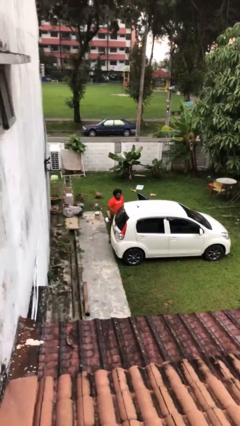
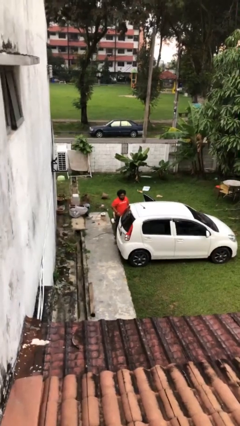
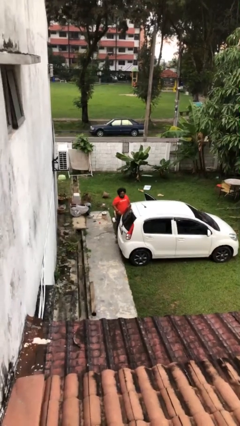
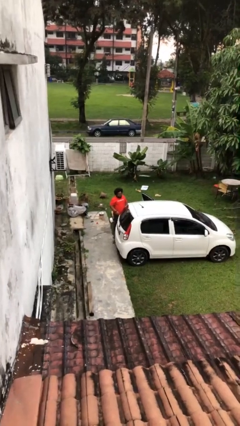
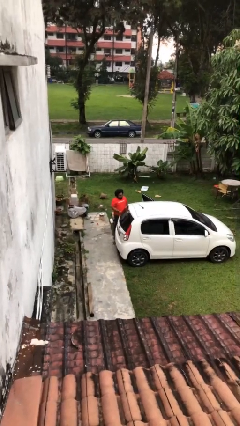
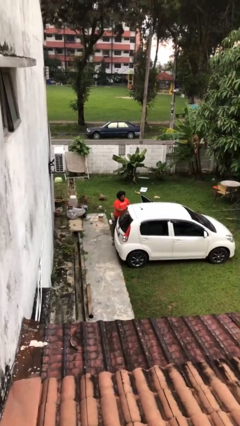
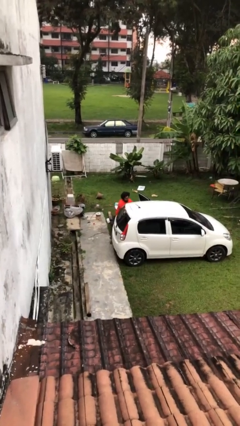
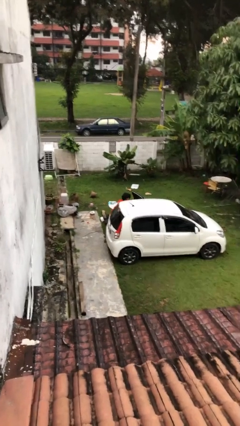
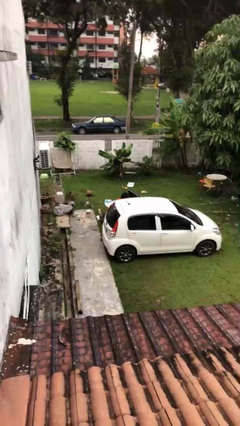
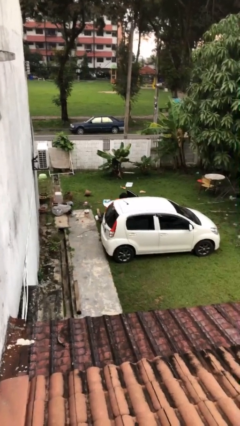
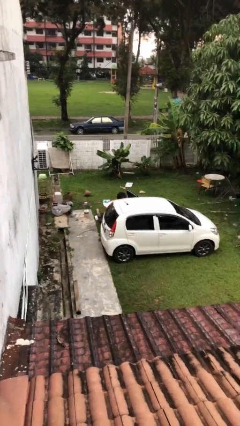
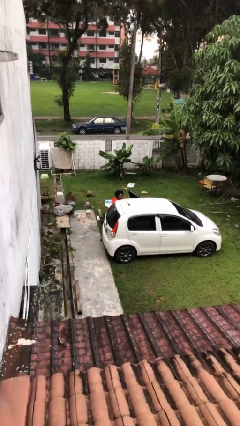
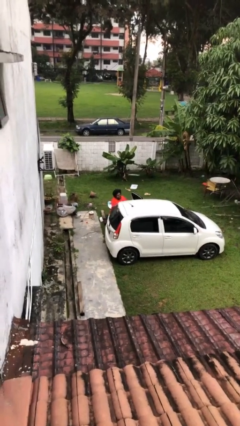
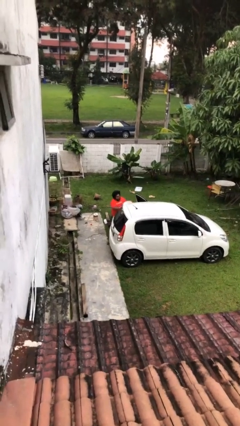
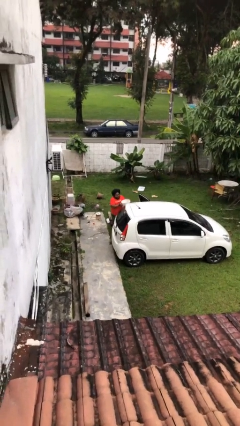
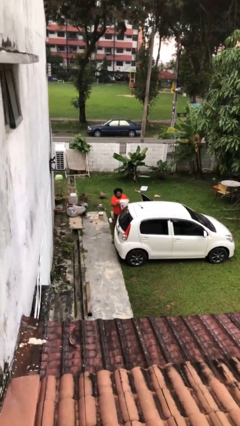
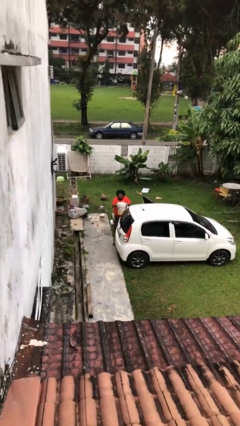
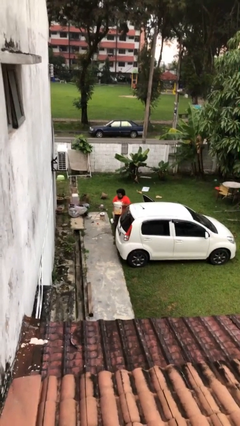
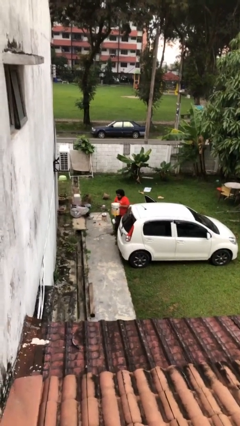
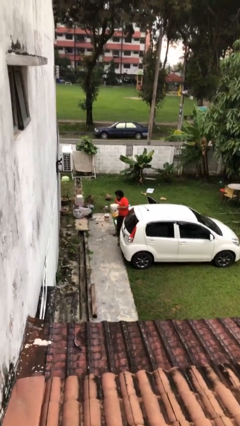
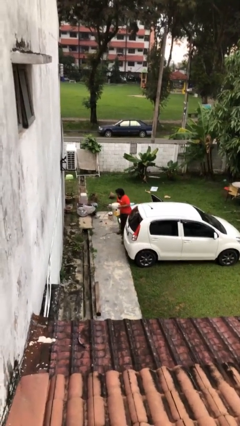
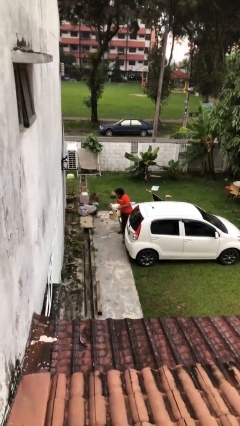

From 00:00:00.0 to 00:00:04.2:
person unloads car

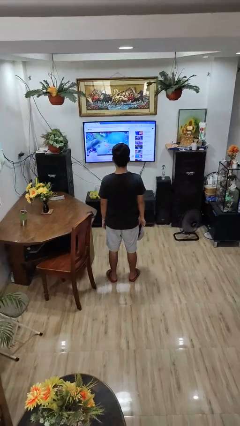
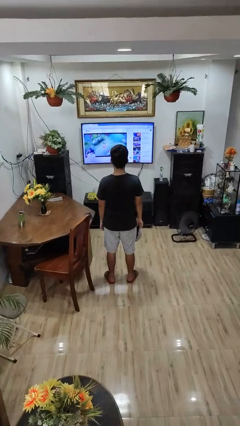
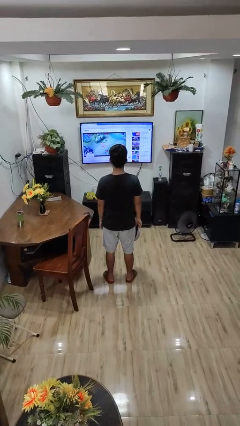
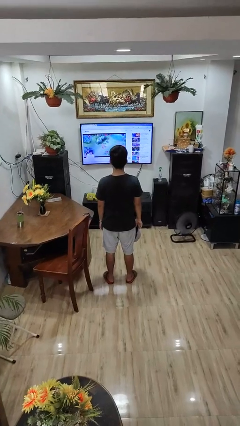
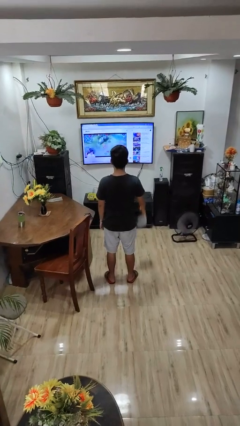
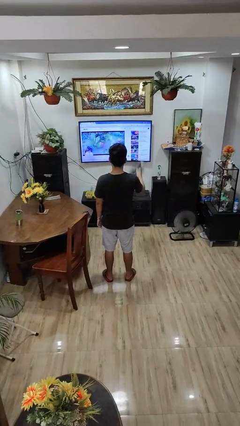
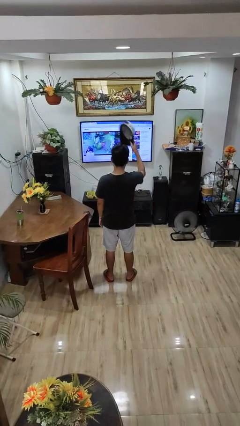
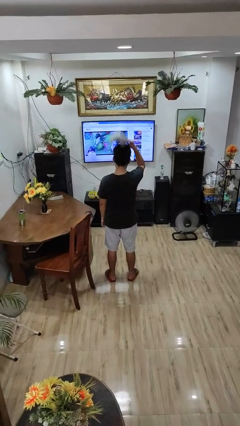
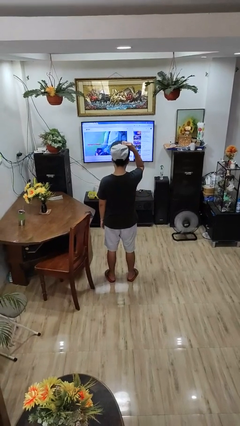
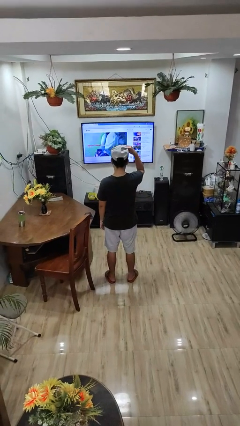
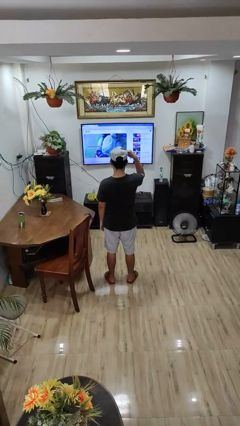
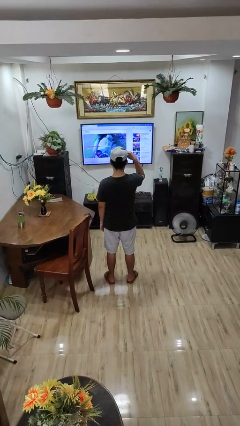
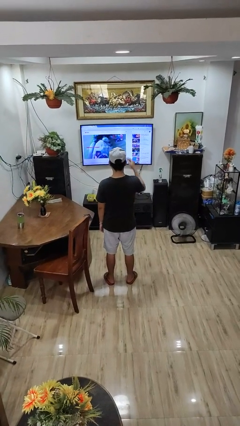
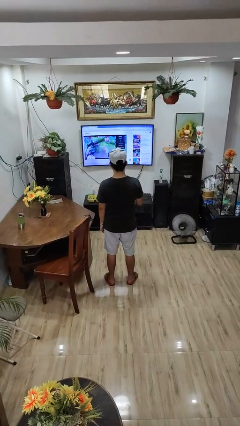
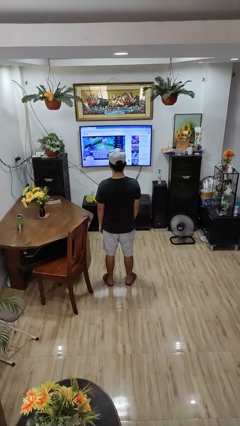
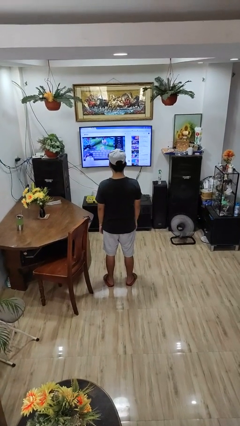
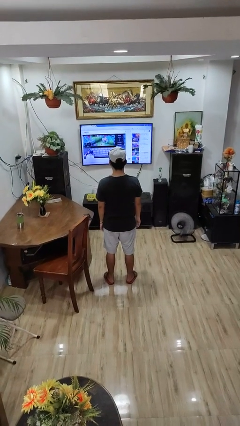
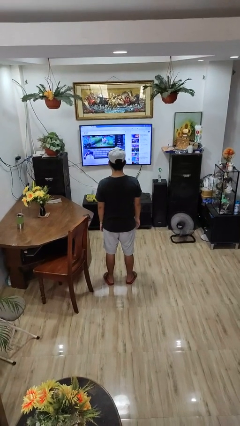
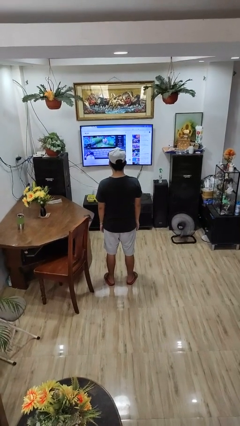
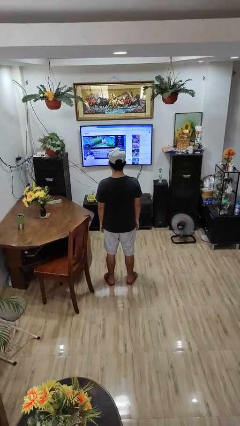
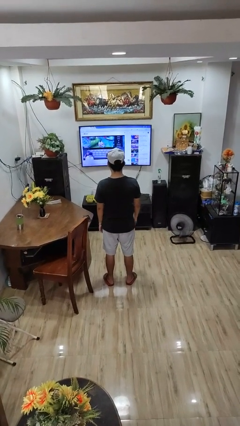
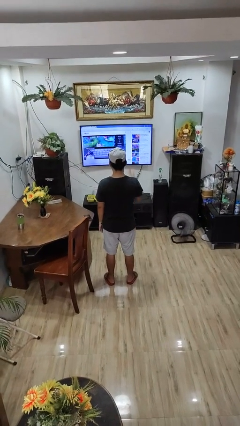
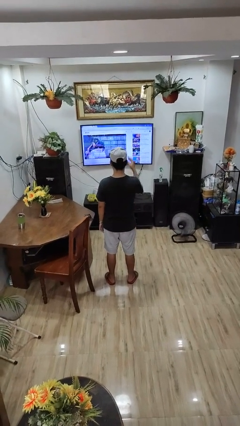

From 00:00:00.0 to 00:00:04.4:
person sweeps floor

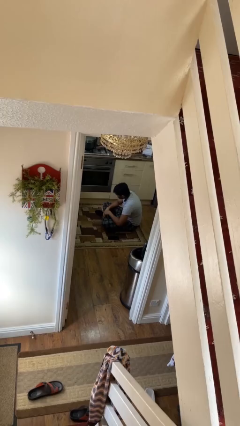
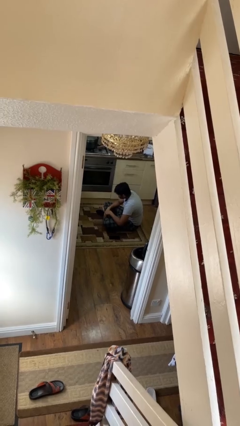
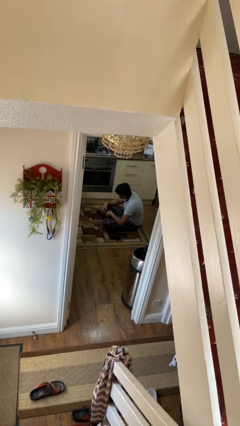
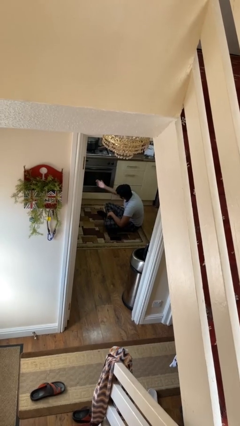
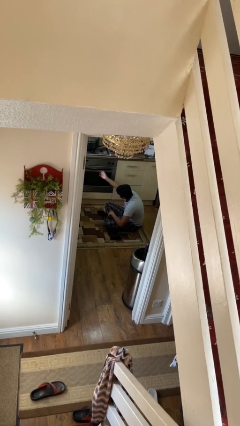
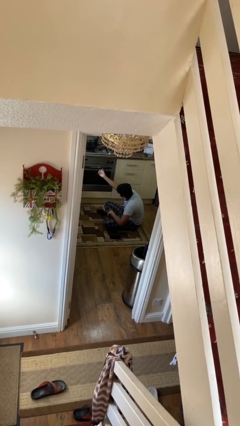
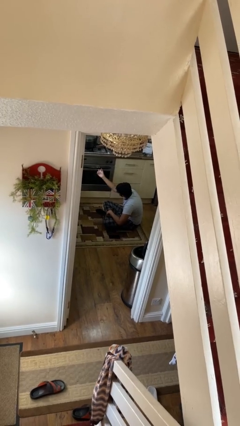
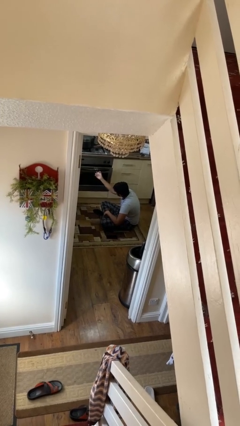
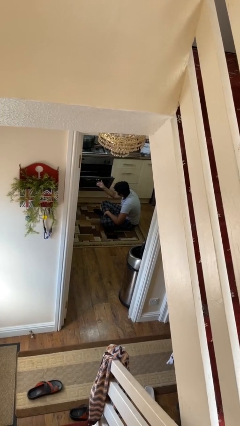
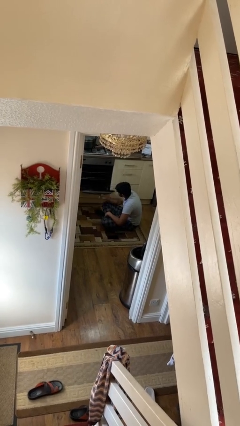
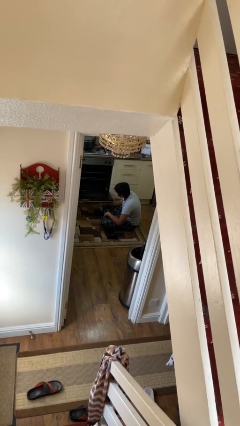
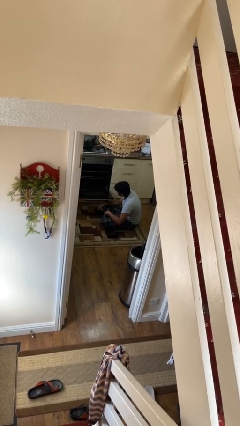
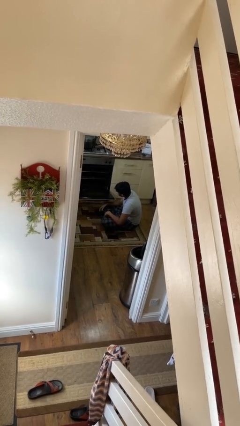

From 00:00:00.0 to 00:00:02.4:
person opens oven door

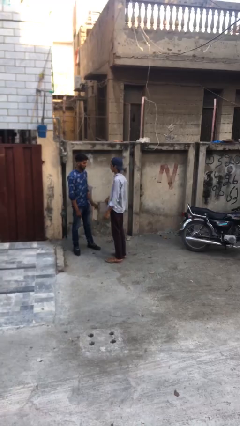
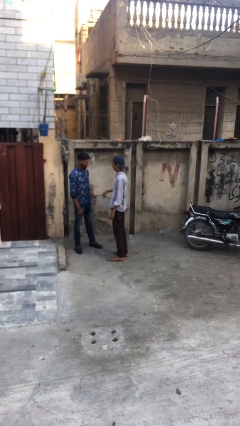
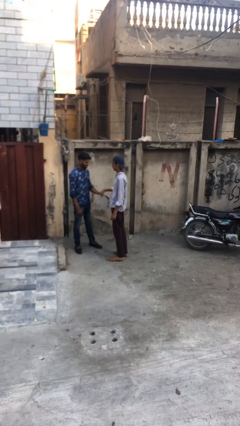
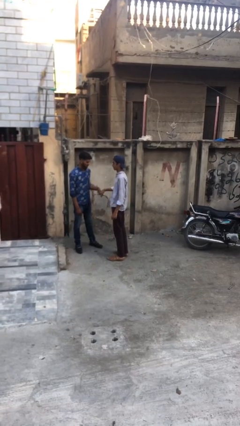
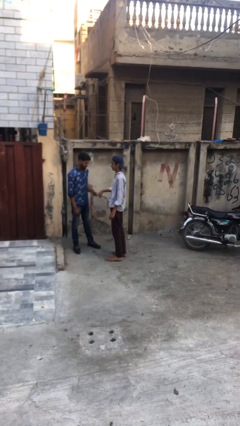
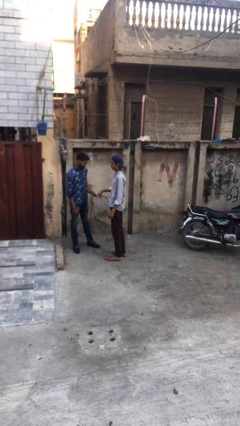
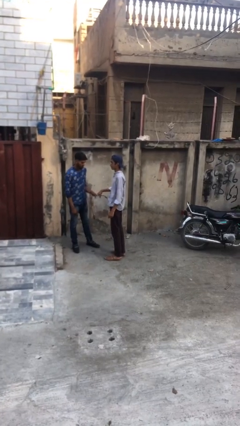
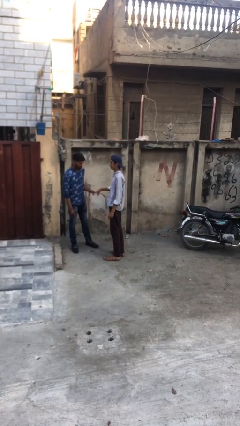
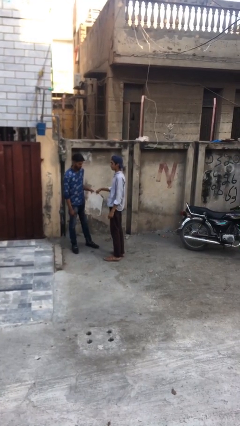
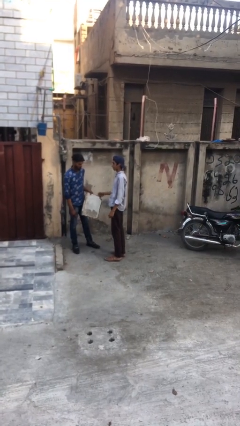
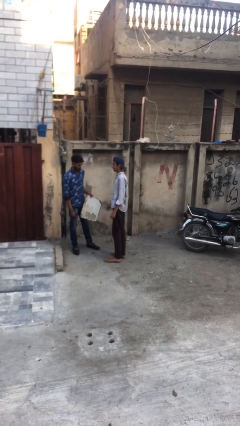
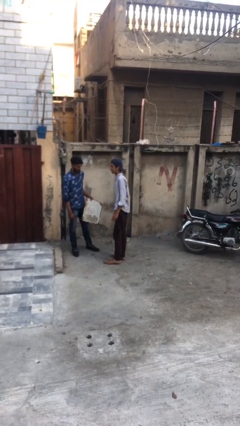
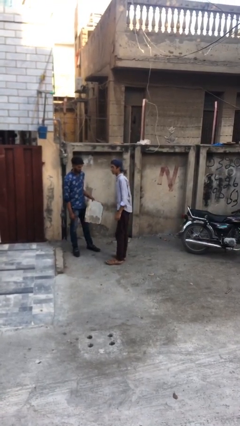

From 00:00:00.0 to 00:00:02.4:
person transfers object to person

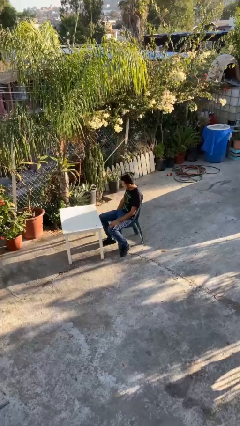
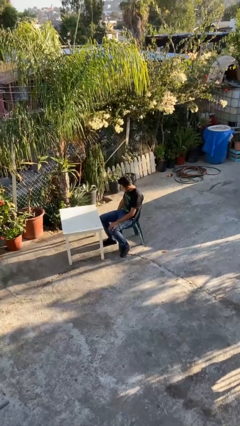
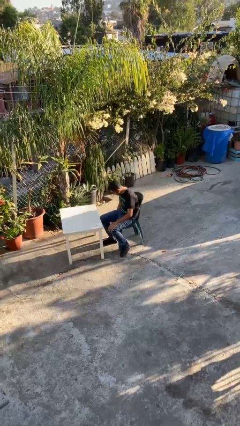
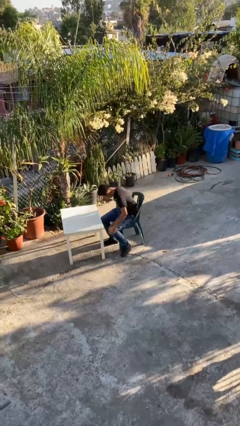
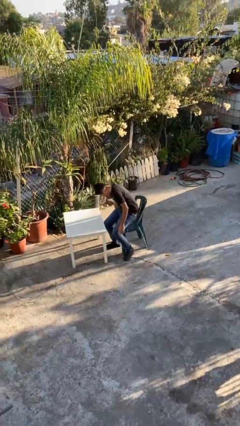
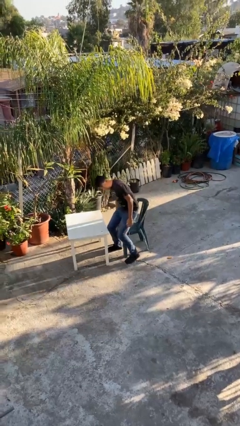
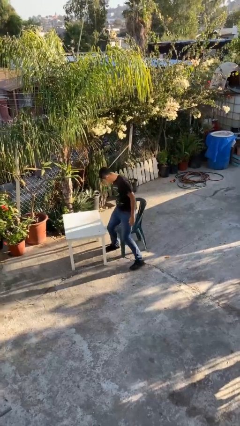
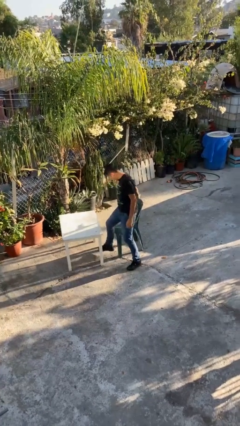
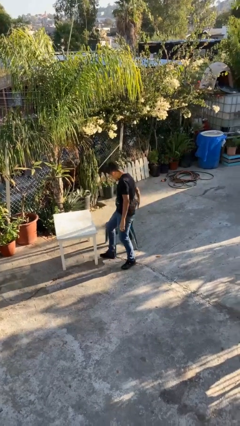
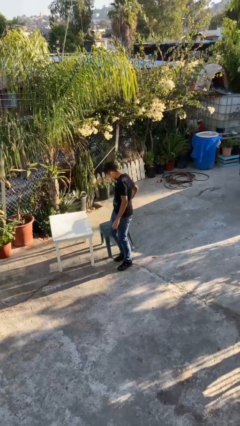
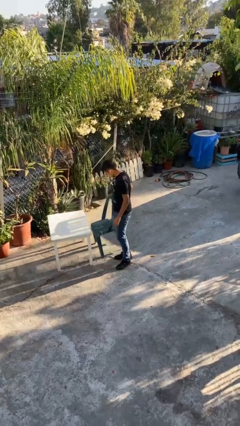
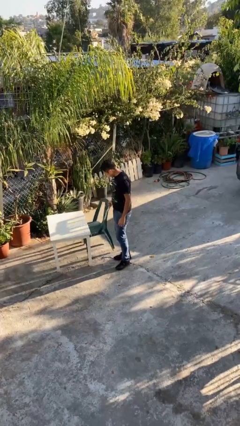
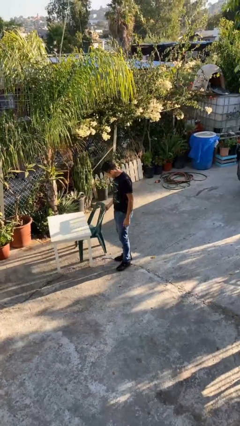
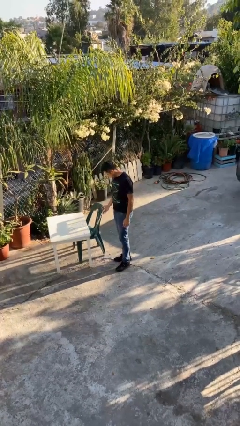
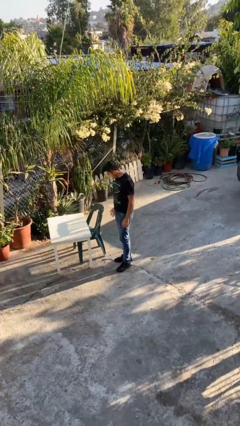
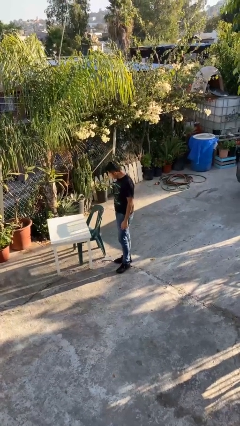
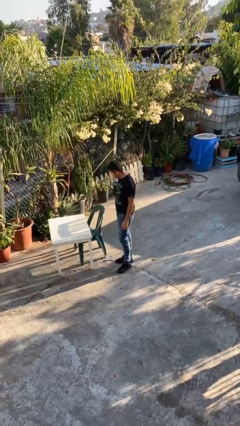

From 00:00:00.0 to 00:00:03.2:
person stands up

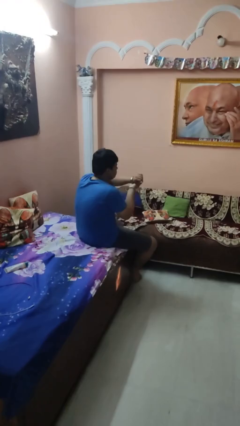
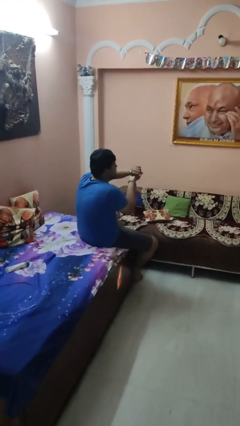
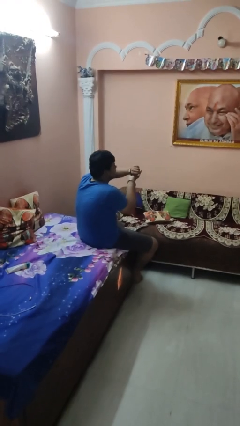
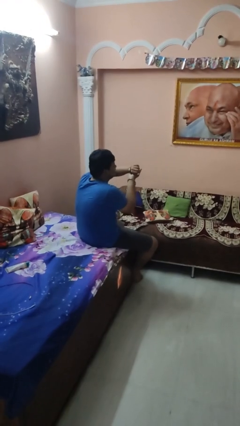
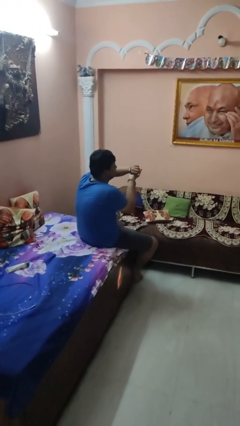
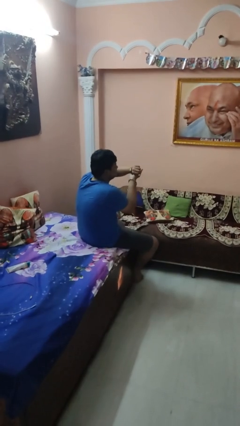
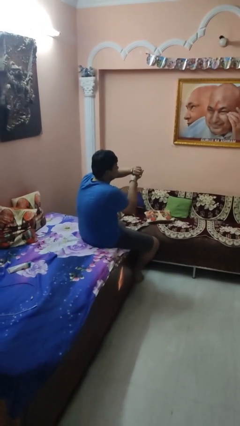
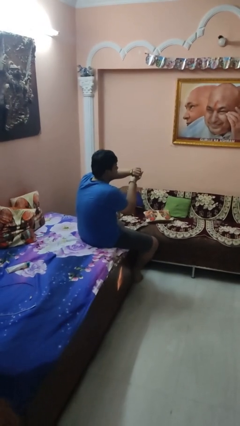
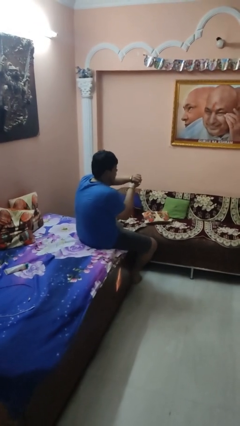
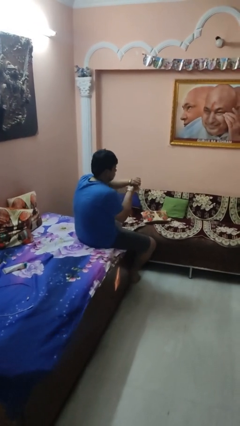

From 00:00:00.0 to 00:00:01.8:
person looks at wristwatch
